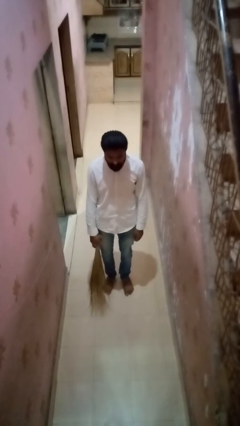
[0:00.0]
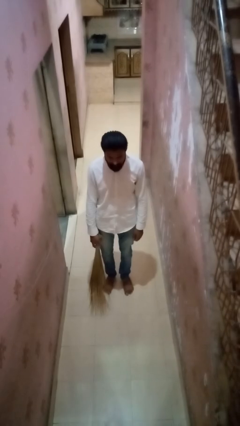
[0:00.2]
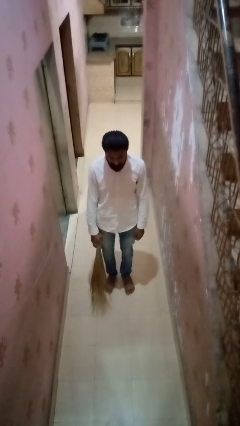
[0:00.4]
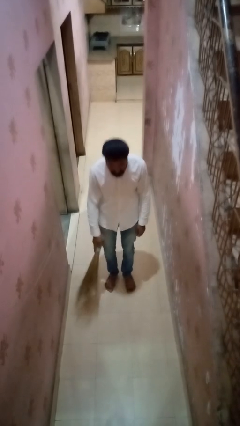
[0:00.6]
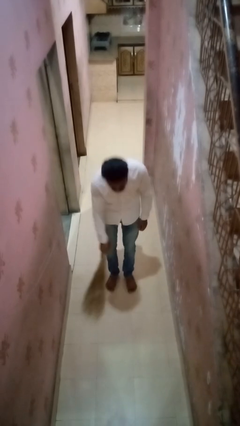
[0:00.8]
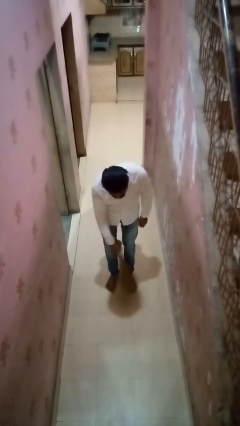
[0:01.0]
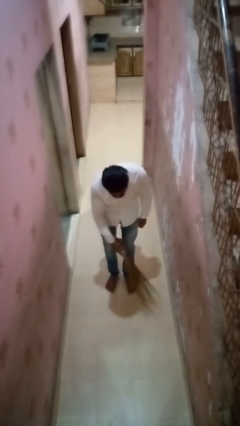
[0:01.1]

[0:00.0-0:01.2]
person sweeps floor

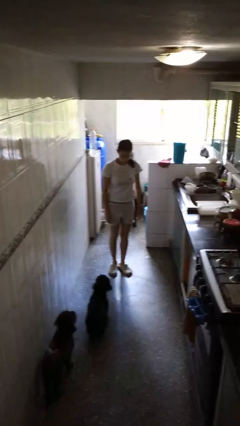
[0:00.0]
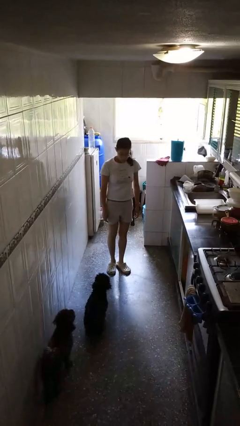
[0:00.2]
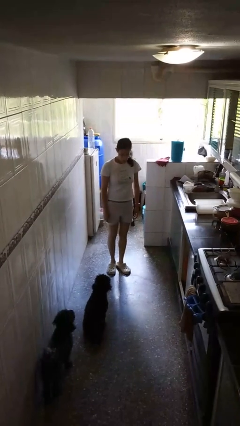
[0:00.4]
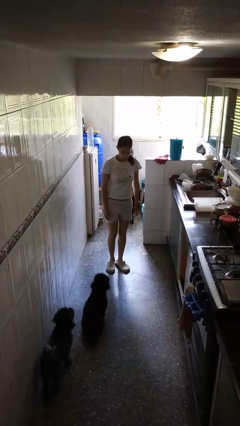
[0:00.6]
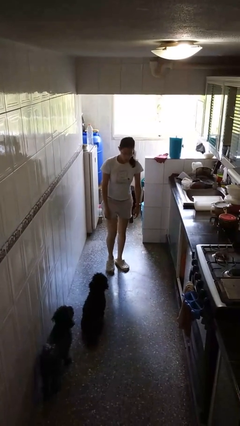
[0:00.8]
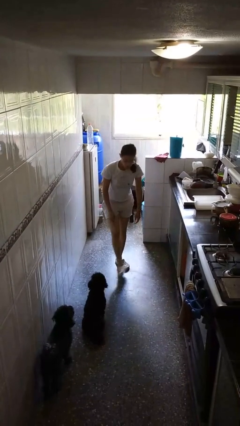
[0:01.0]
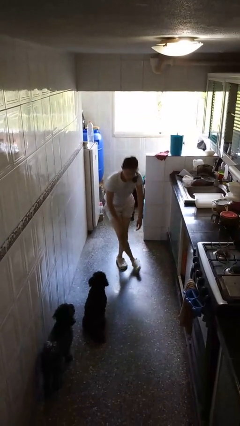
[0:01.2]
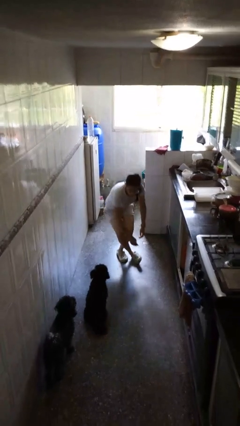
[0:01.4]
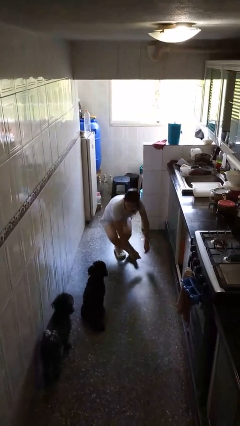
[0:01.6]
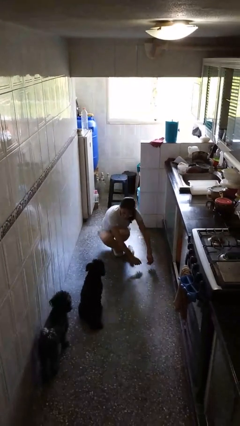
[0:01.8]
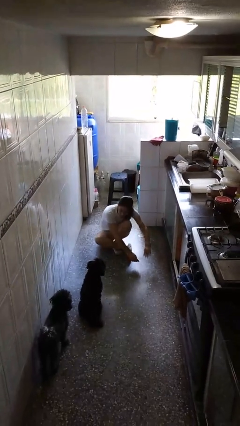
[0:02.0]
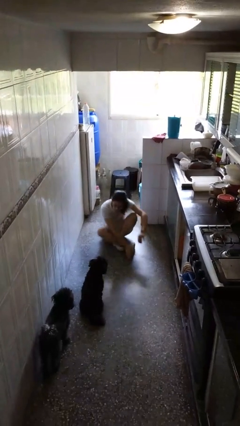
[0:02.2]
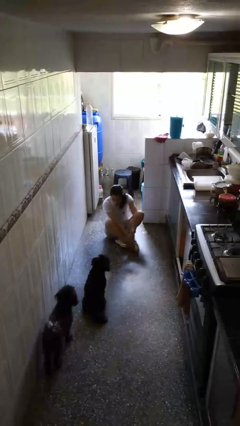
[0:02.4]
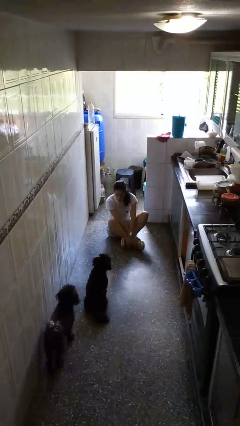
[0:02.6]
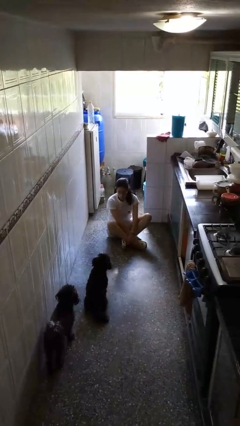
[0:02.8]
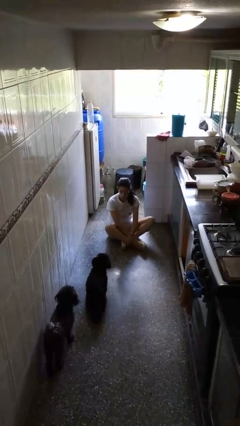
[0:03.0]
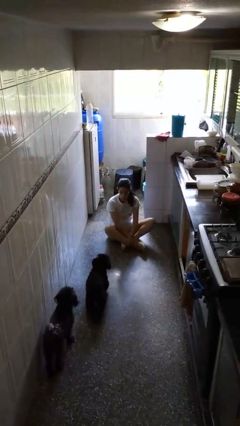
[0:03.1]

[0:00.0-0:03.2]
person sits crisscross

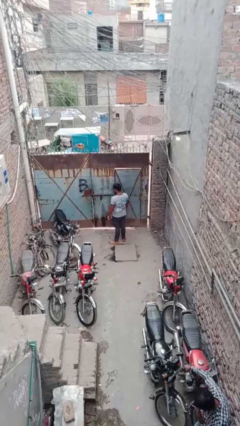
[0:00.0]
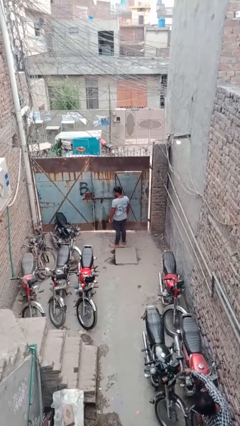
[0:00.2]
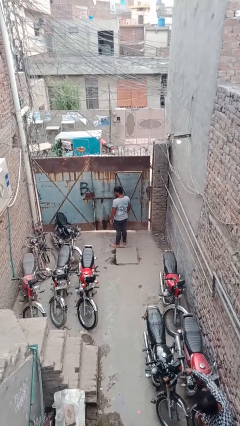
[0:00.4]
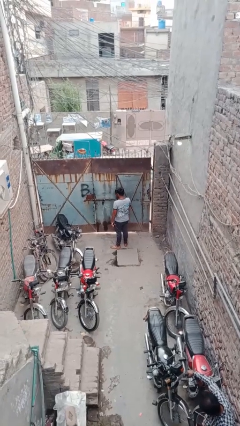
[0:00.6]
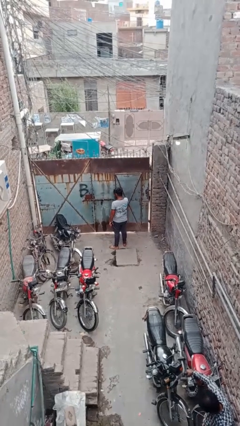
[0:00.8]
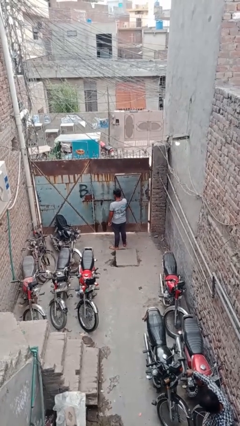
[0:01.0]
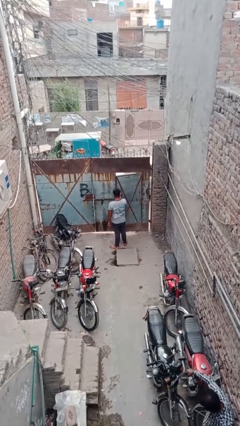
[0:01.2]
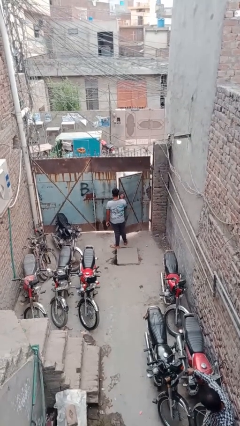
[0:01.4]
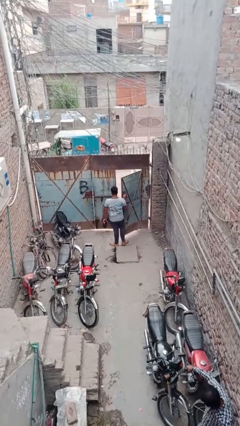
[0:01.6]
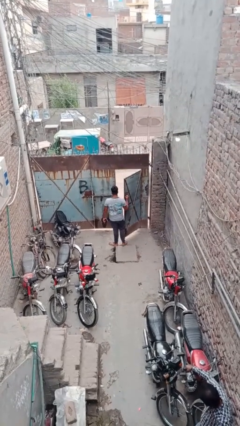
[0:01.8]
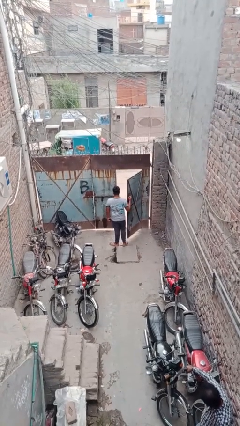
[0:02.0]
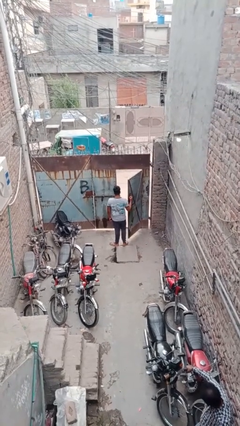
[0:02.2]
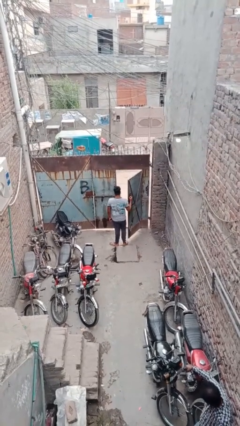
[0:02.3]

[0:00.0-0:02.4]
person opens facility door

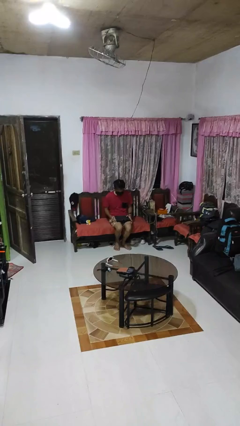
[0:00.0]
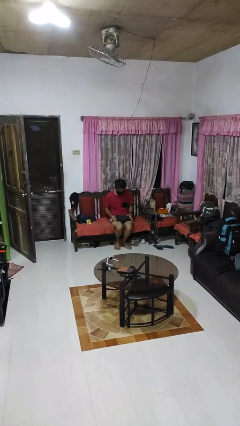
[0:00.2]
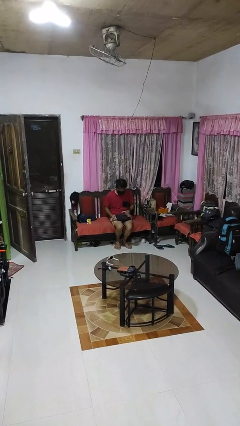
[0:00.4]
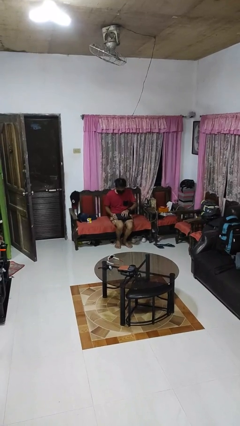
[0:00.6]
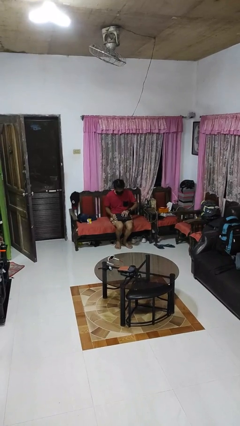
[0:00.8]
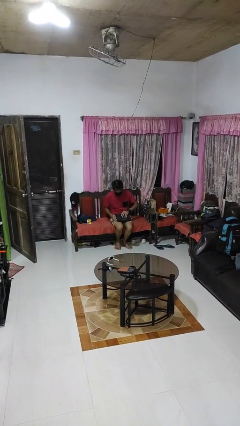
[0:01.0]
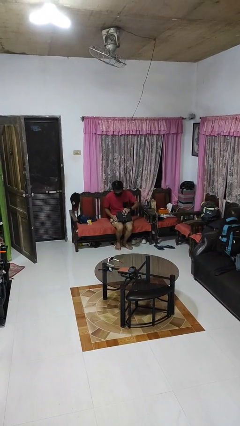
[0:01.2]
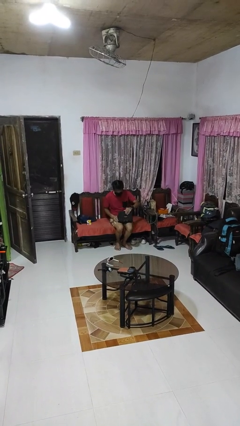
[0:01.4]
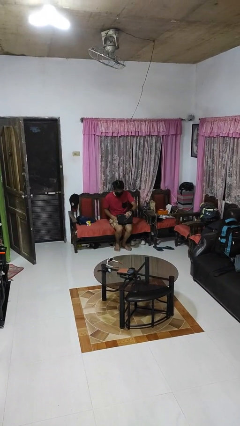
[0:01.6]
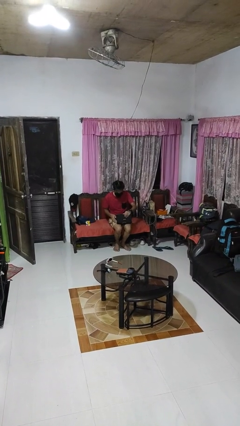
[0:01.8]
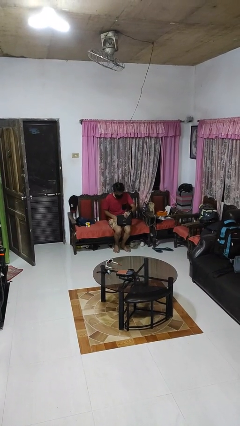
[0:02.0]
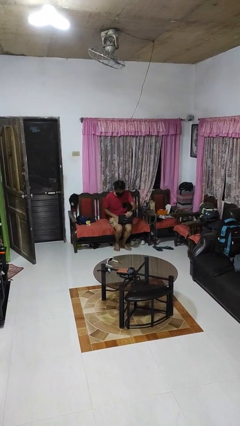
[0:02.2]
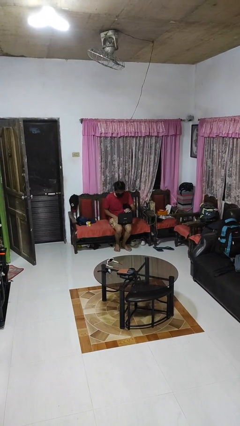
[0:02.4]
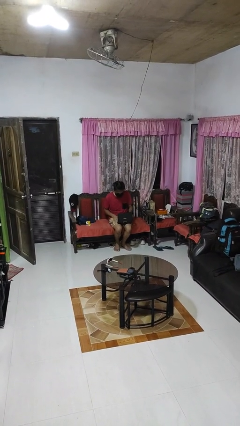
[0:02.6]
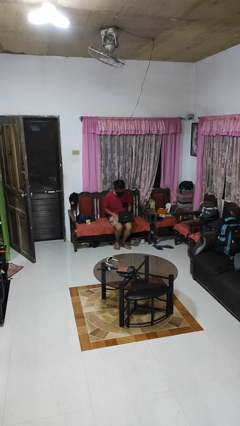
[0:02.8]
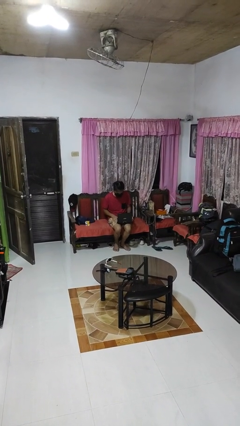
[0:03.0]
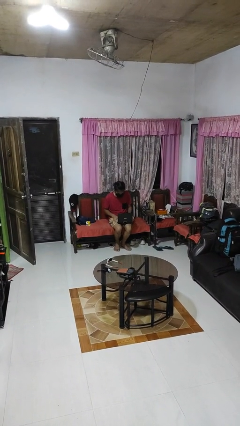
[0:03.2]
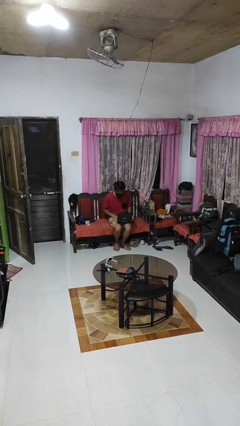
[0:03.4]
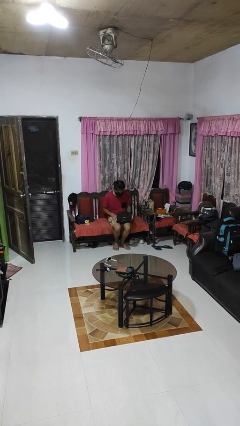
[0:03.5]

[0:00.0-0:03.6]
person opens laptop

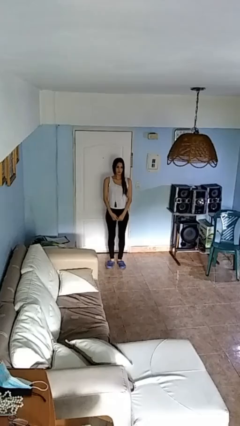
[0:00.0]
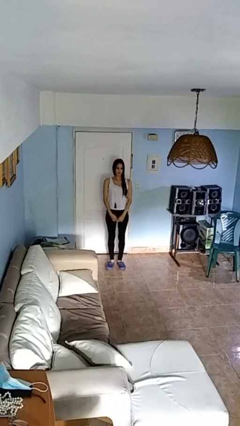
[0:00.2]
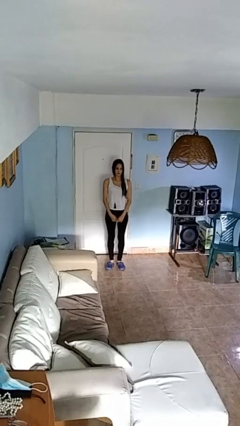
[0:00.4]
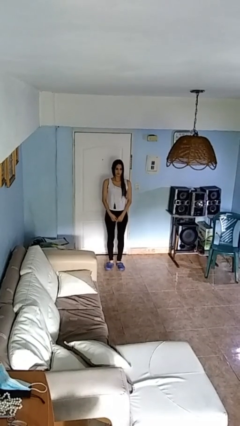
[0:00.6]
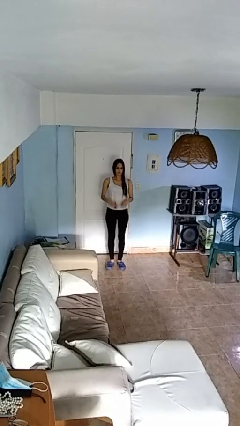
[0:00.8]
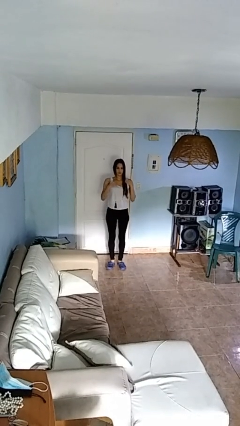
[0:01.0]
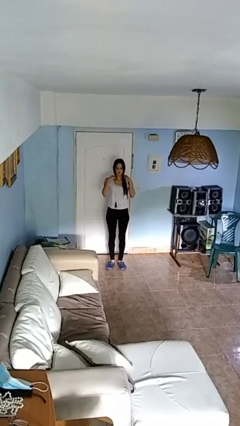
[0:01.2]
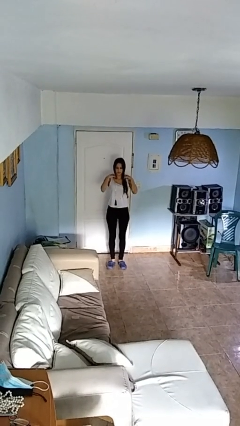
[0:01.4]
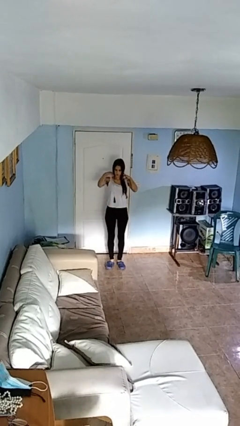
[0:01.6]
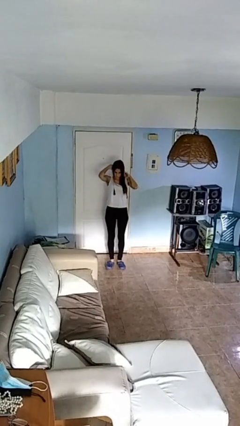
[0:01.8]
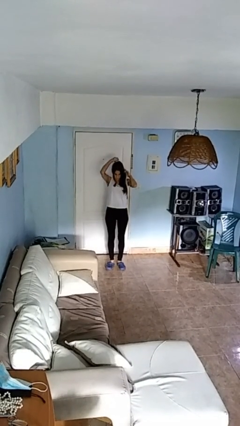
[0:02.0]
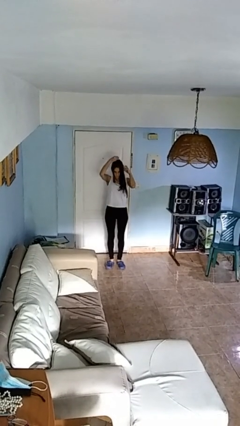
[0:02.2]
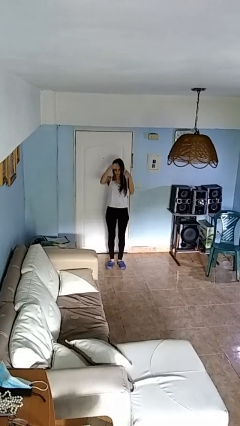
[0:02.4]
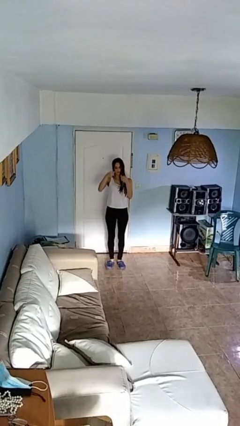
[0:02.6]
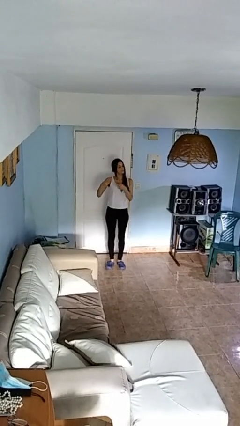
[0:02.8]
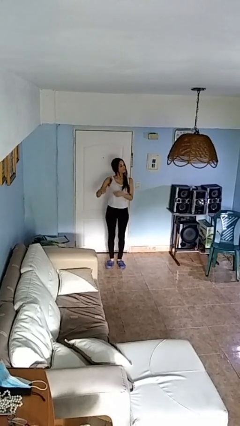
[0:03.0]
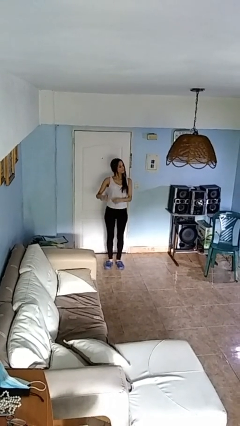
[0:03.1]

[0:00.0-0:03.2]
person takes off necklace

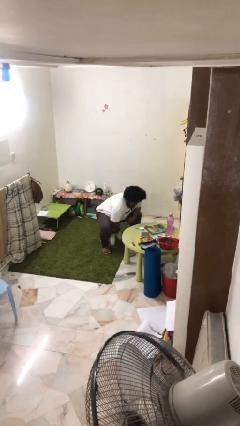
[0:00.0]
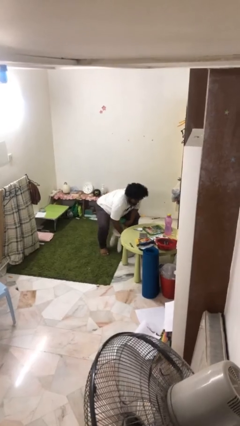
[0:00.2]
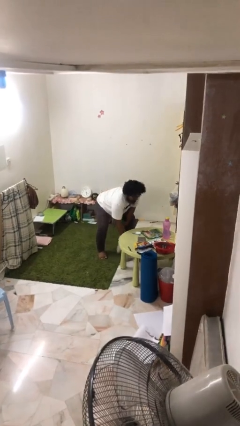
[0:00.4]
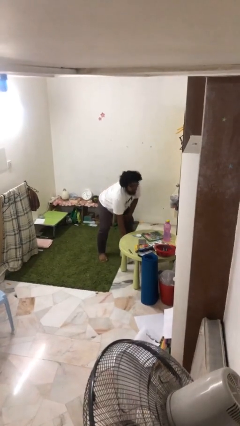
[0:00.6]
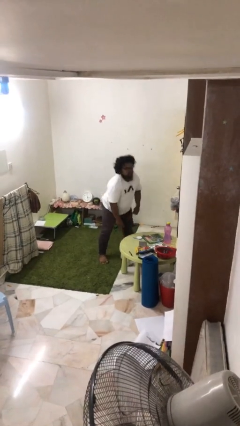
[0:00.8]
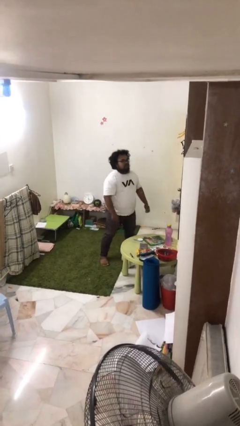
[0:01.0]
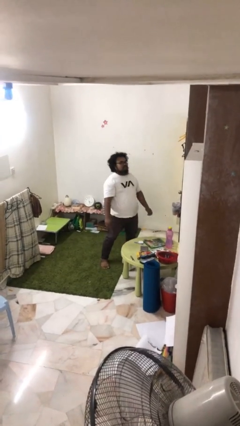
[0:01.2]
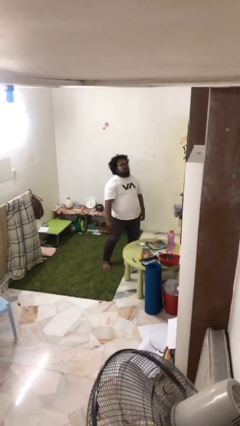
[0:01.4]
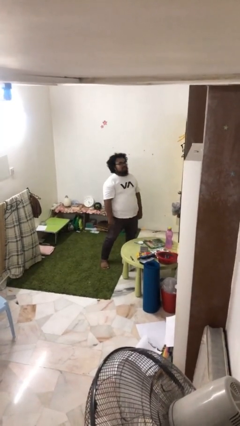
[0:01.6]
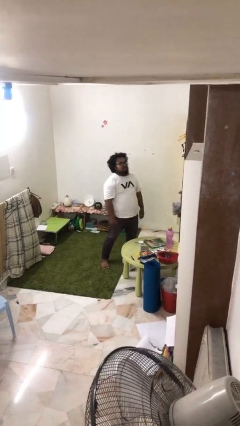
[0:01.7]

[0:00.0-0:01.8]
person stands up

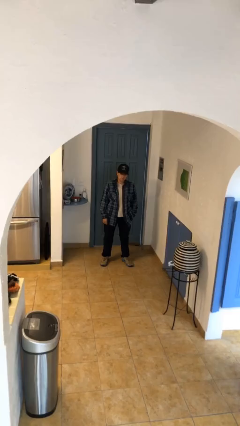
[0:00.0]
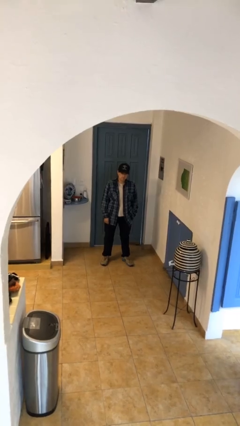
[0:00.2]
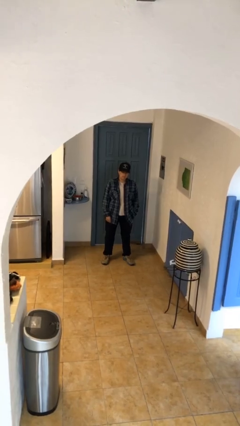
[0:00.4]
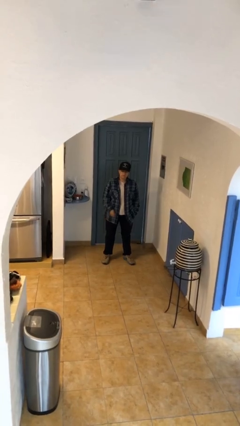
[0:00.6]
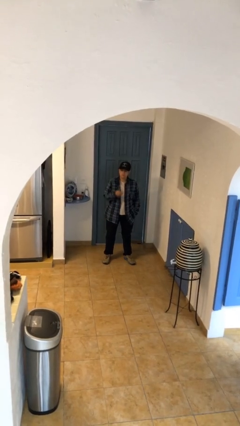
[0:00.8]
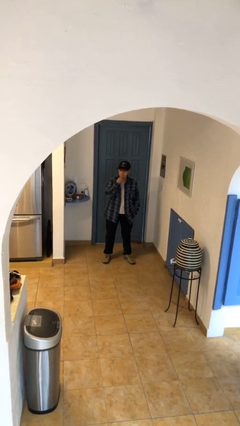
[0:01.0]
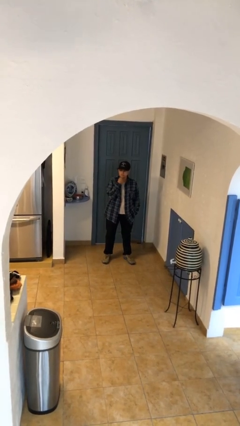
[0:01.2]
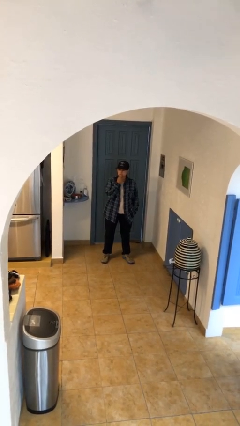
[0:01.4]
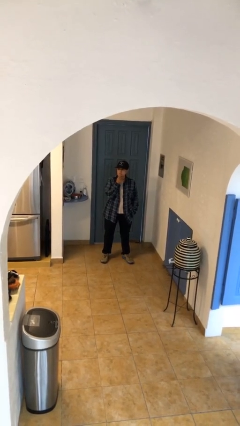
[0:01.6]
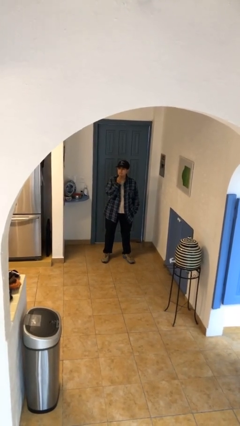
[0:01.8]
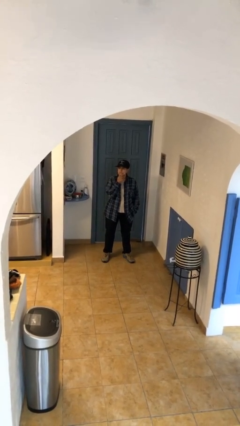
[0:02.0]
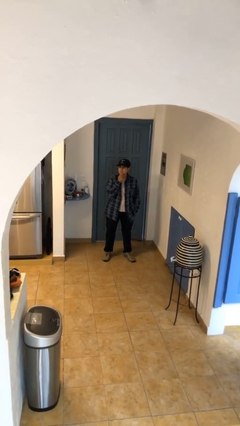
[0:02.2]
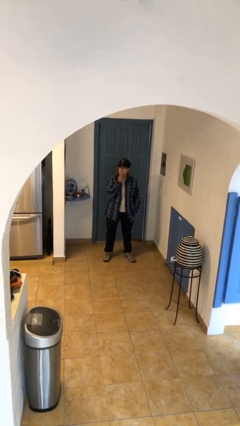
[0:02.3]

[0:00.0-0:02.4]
person strokes chin
